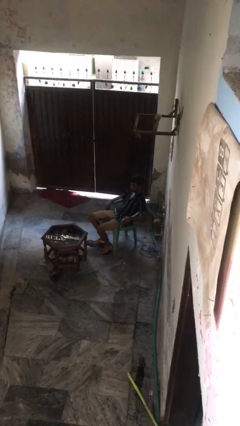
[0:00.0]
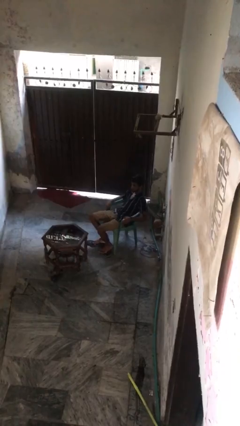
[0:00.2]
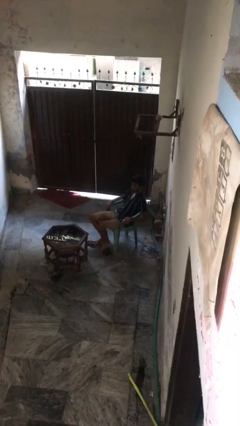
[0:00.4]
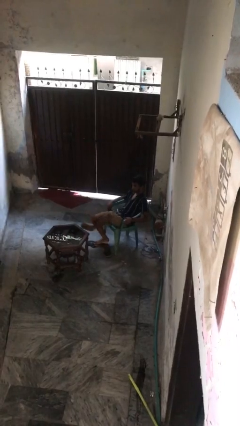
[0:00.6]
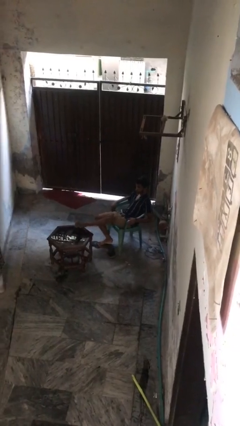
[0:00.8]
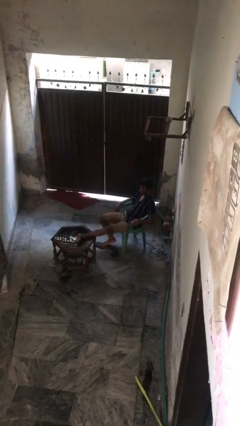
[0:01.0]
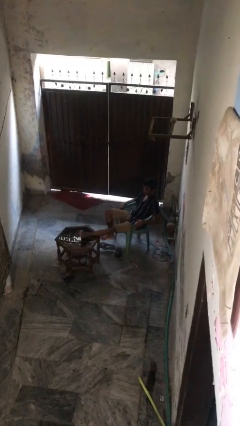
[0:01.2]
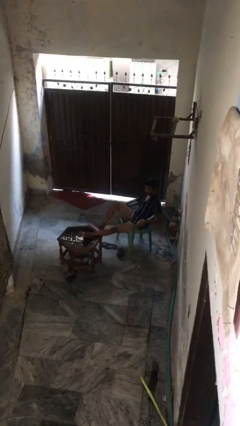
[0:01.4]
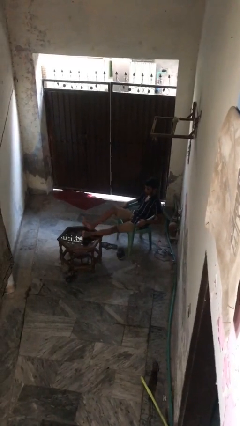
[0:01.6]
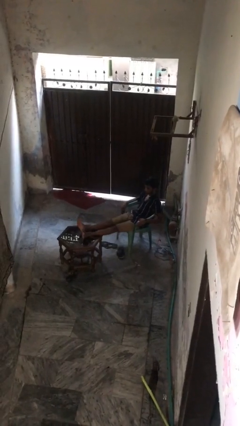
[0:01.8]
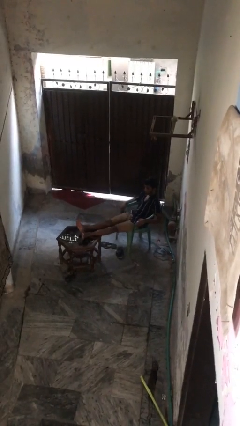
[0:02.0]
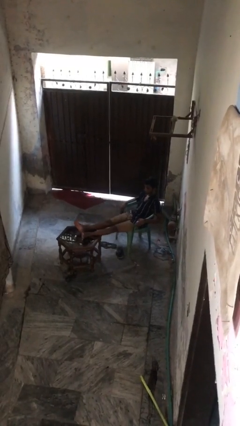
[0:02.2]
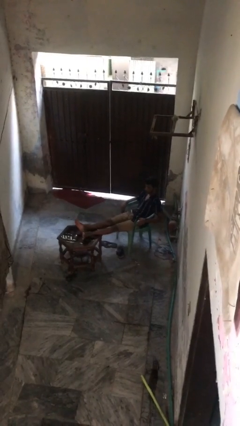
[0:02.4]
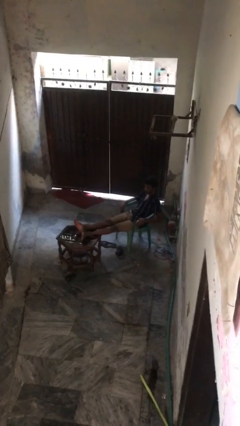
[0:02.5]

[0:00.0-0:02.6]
person puts feet up

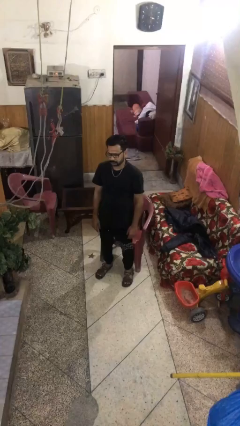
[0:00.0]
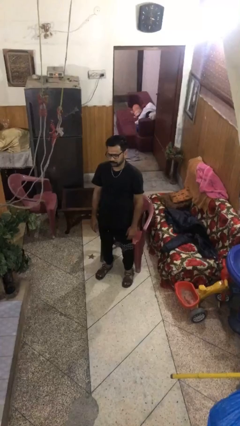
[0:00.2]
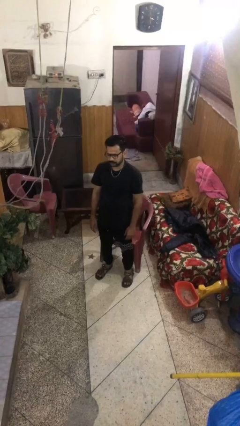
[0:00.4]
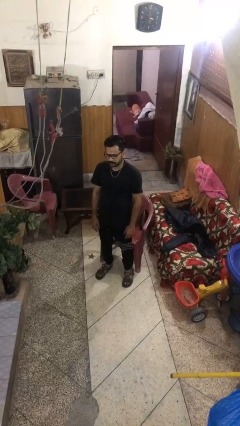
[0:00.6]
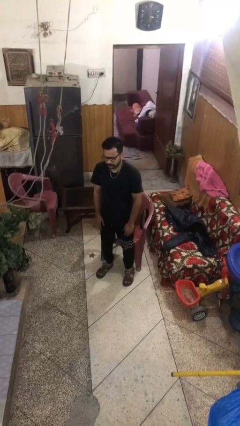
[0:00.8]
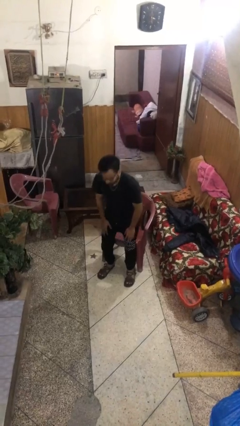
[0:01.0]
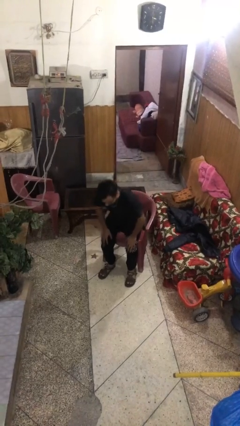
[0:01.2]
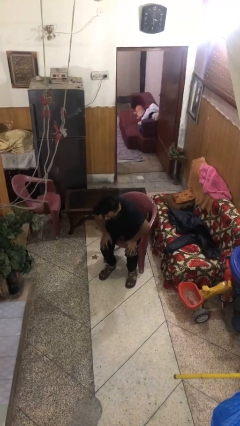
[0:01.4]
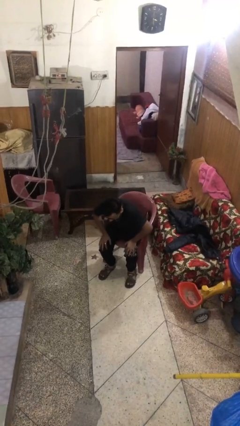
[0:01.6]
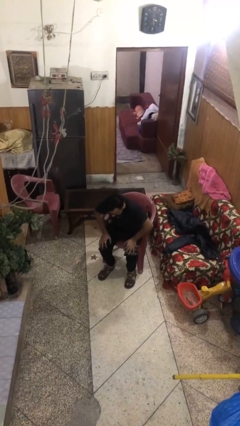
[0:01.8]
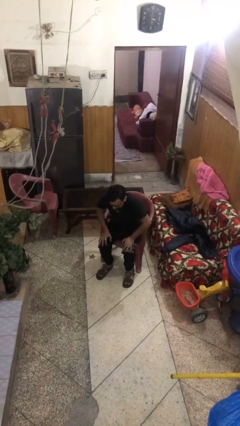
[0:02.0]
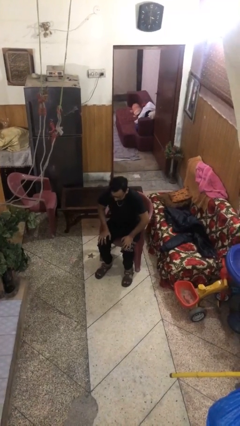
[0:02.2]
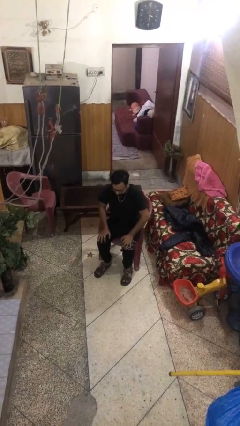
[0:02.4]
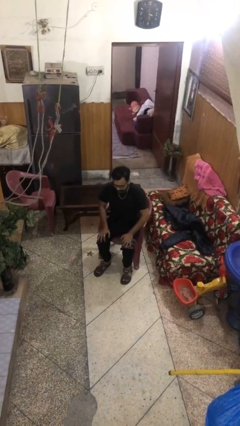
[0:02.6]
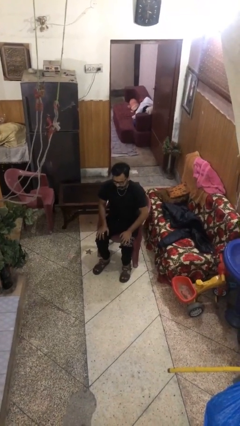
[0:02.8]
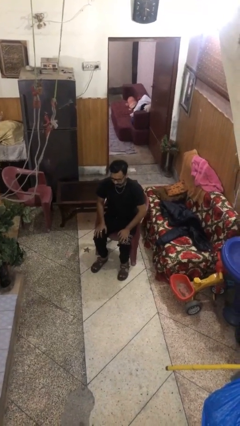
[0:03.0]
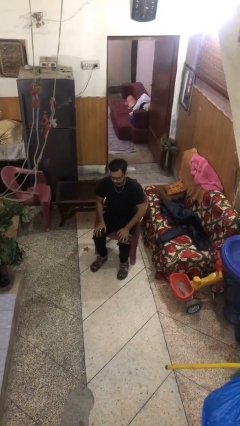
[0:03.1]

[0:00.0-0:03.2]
person sits down

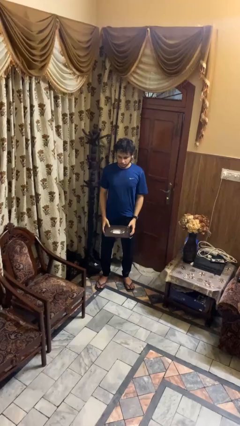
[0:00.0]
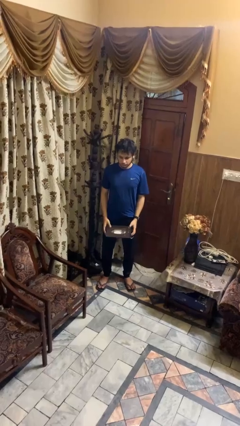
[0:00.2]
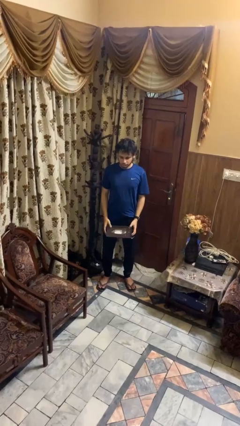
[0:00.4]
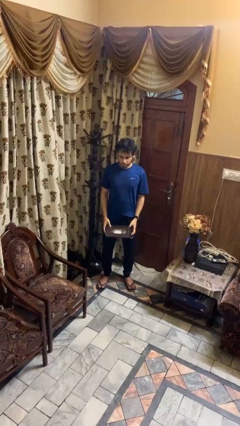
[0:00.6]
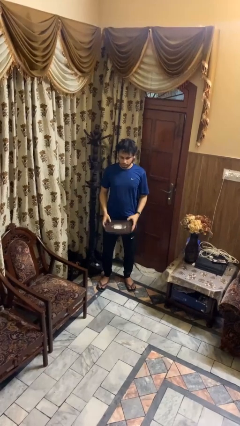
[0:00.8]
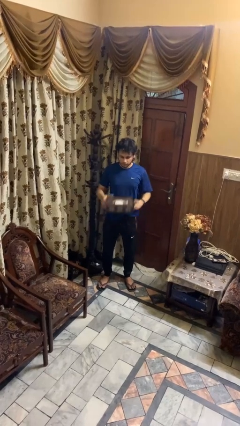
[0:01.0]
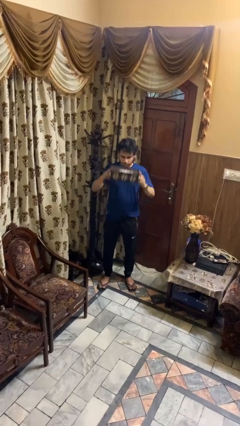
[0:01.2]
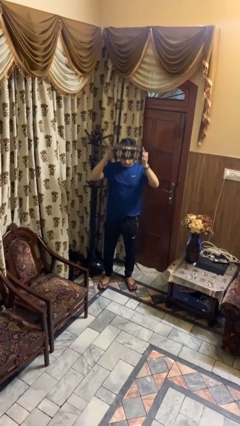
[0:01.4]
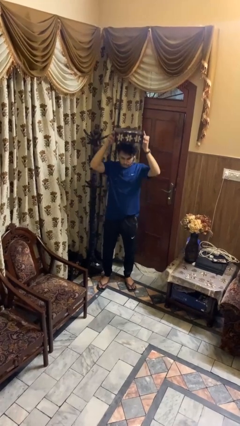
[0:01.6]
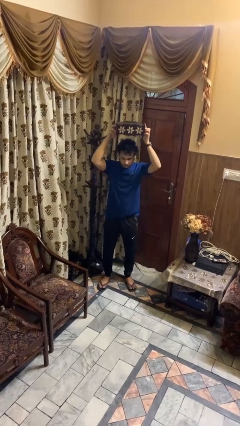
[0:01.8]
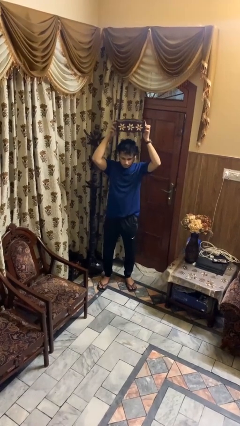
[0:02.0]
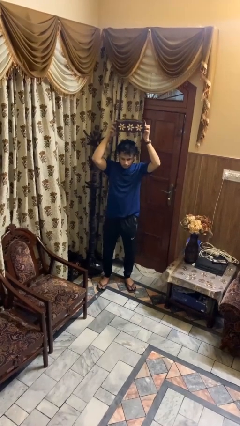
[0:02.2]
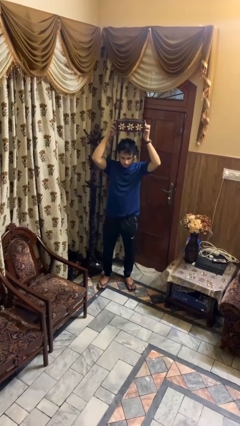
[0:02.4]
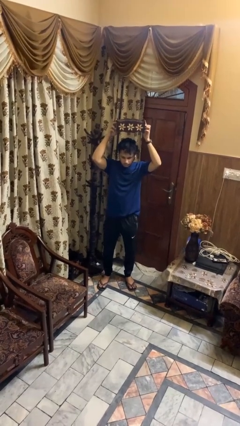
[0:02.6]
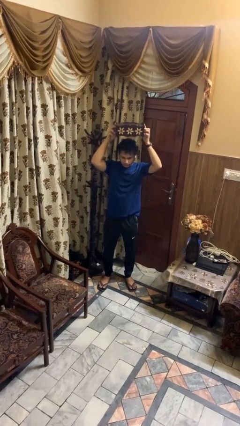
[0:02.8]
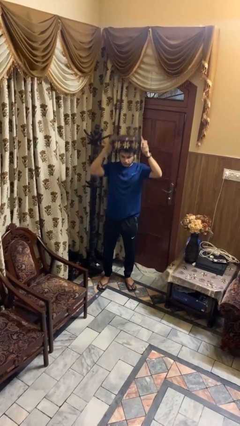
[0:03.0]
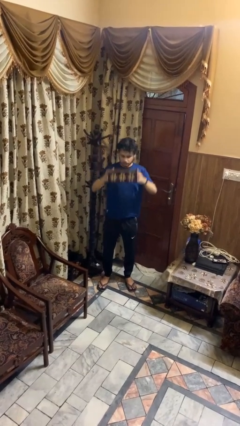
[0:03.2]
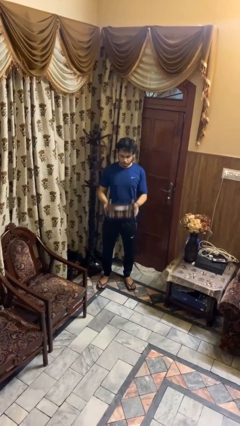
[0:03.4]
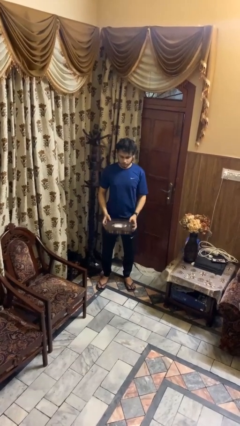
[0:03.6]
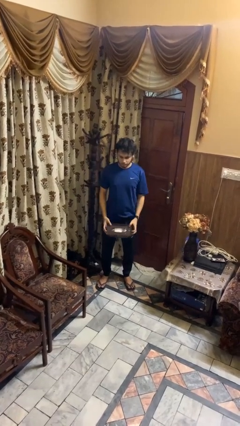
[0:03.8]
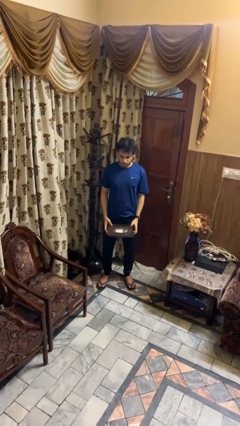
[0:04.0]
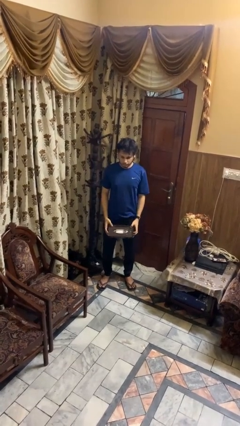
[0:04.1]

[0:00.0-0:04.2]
person holds object above head

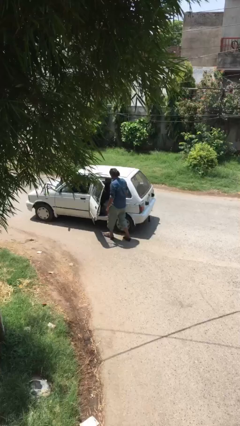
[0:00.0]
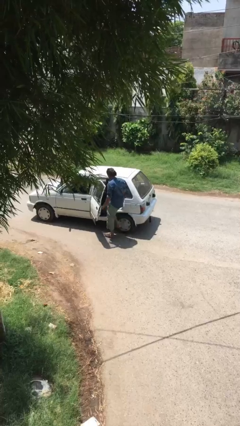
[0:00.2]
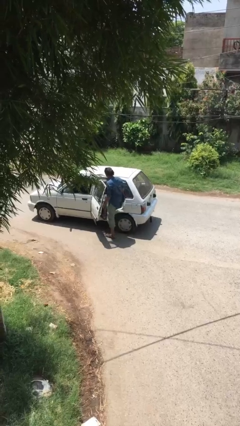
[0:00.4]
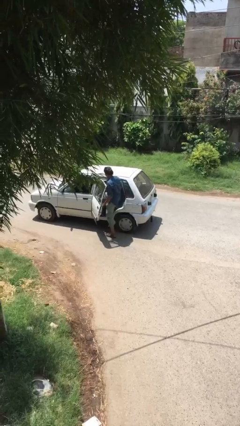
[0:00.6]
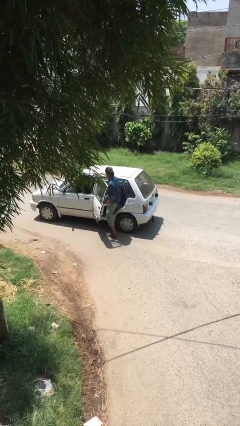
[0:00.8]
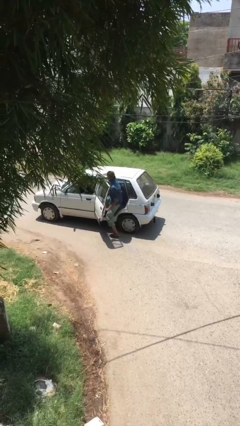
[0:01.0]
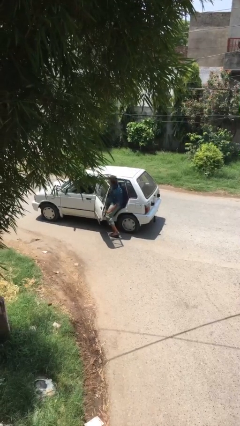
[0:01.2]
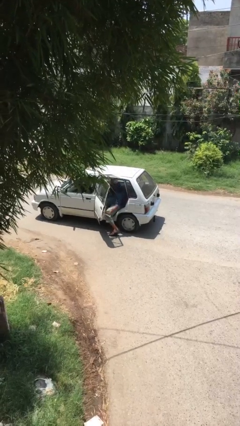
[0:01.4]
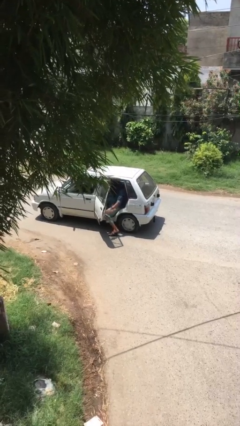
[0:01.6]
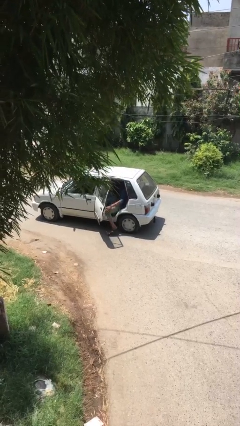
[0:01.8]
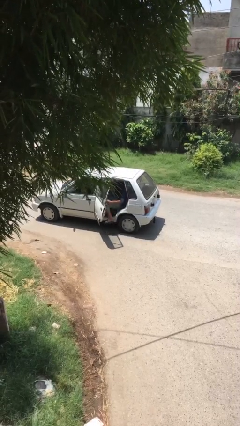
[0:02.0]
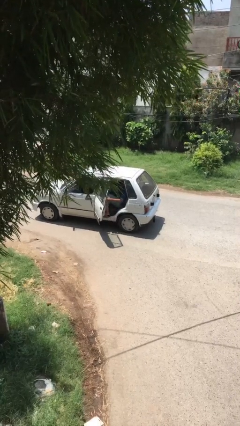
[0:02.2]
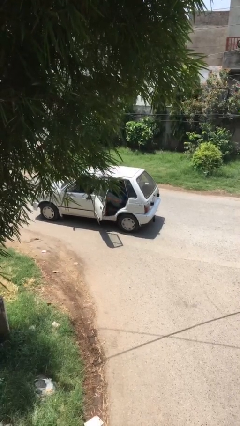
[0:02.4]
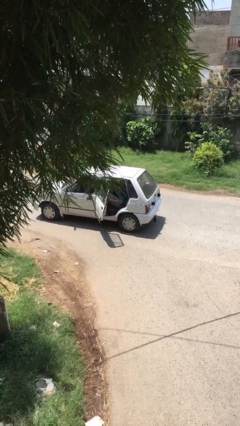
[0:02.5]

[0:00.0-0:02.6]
person enters car

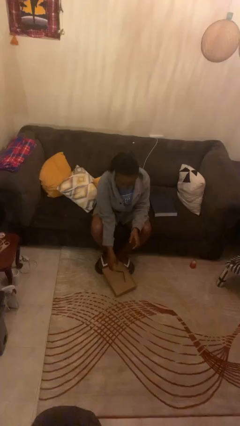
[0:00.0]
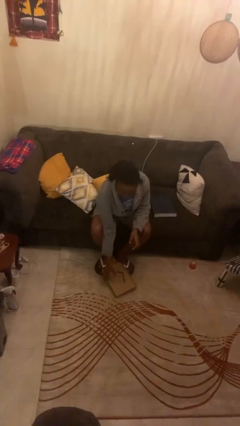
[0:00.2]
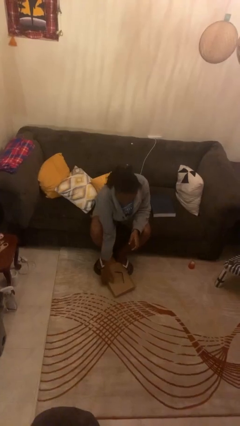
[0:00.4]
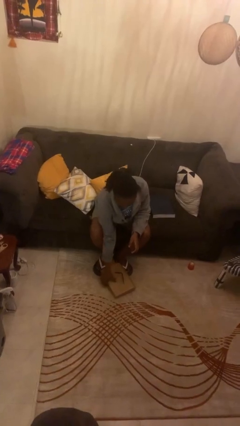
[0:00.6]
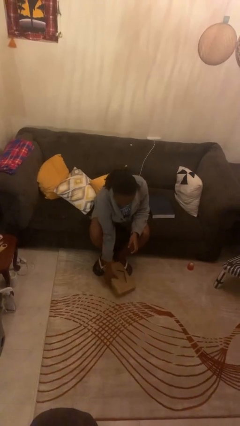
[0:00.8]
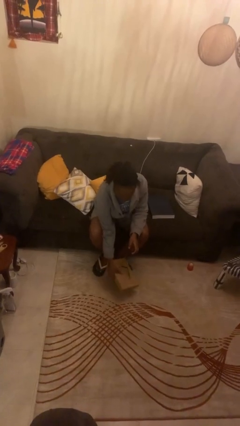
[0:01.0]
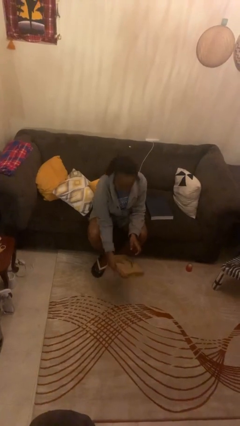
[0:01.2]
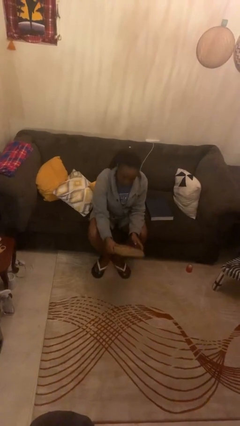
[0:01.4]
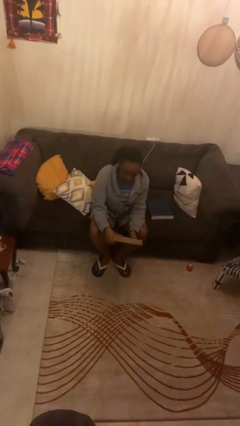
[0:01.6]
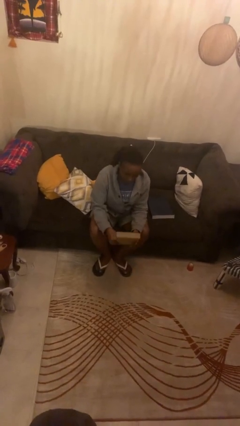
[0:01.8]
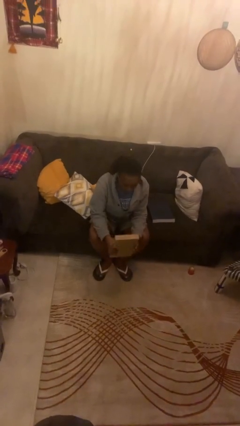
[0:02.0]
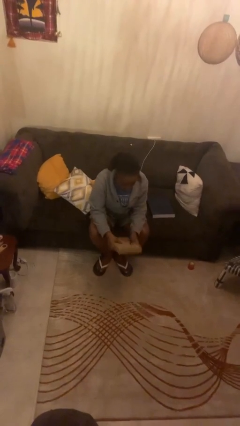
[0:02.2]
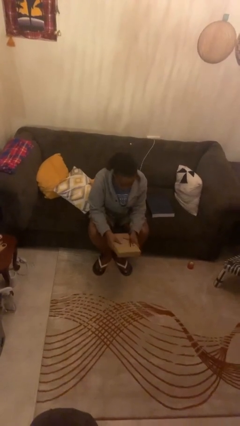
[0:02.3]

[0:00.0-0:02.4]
person picks up object from floor

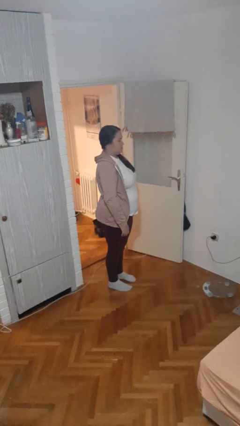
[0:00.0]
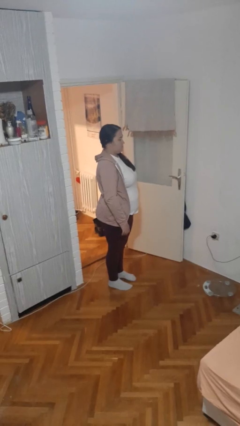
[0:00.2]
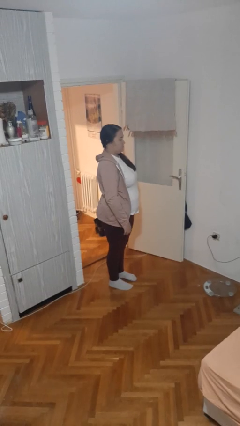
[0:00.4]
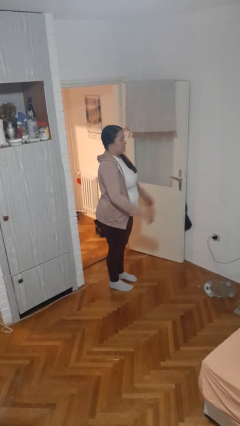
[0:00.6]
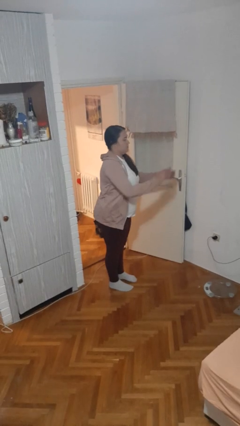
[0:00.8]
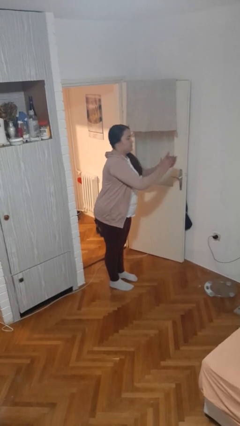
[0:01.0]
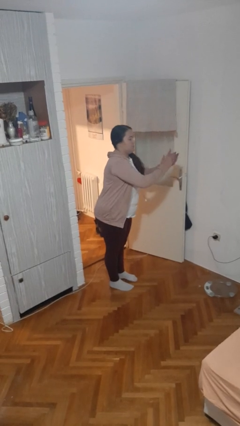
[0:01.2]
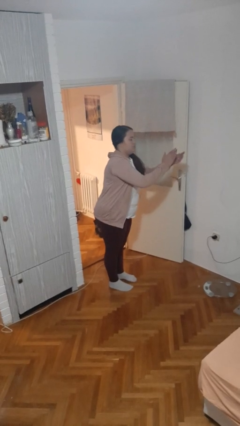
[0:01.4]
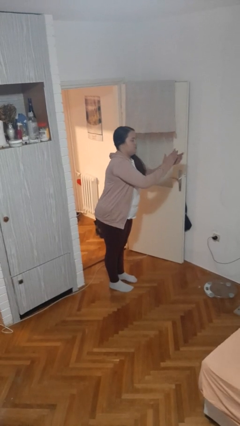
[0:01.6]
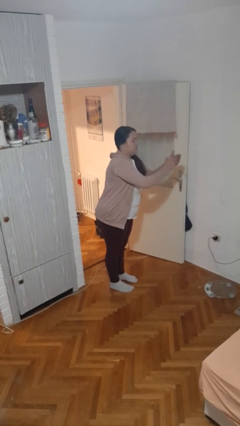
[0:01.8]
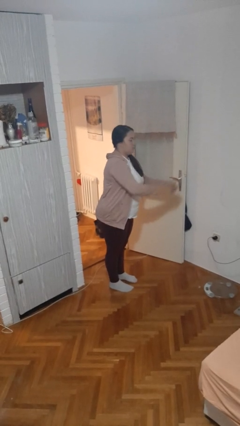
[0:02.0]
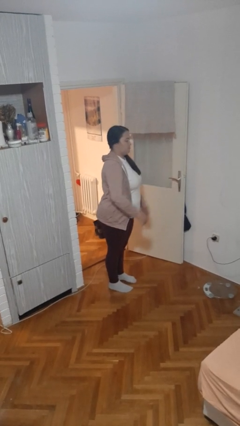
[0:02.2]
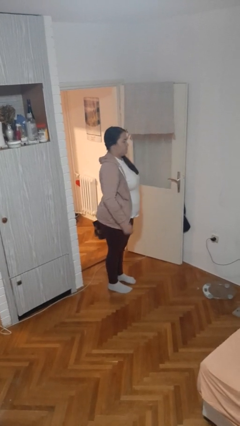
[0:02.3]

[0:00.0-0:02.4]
person claps hands
